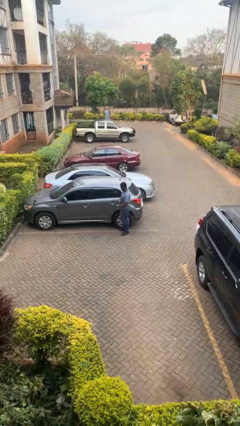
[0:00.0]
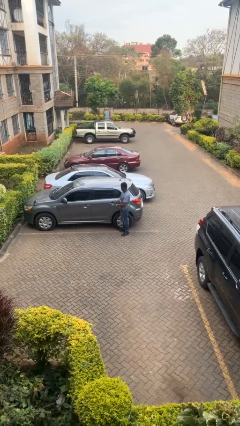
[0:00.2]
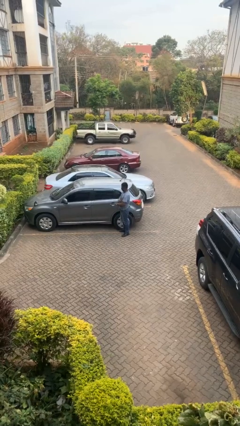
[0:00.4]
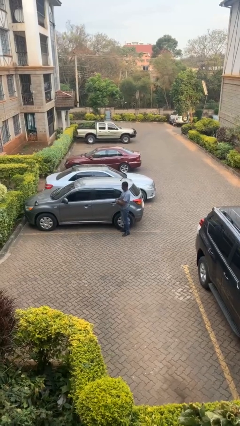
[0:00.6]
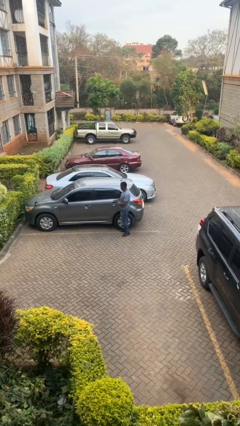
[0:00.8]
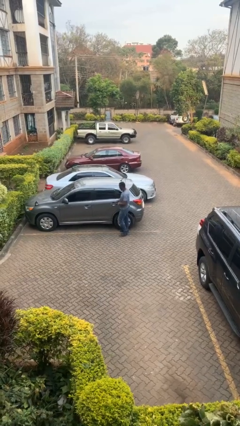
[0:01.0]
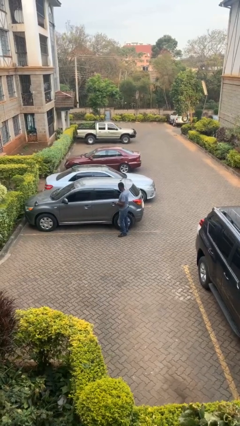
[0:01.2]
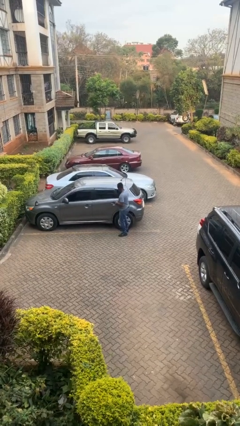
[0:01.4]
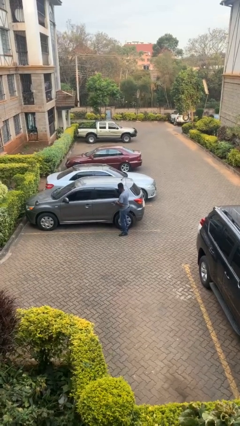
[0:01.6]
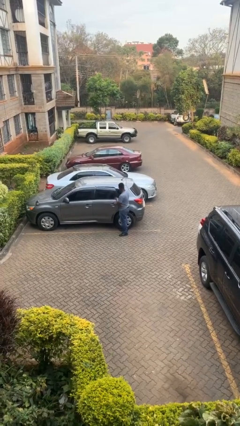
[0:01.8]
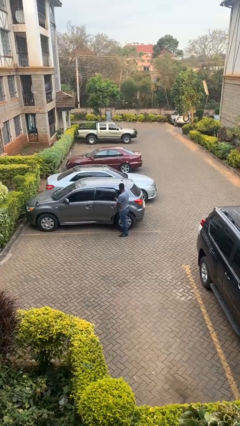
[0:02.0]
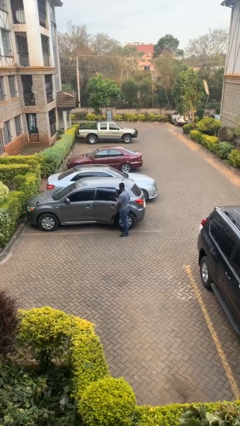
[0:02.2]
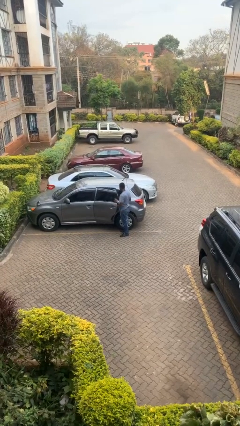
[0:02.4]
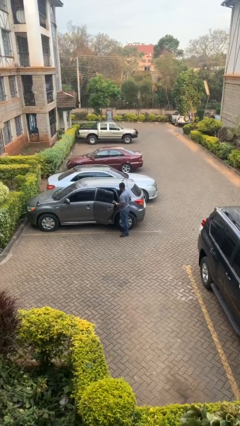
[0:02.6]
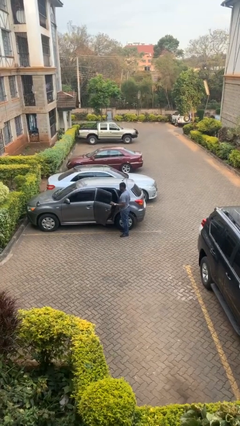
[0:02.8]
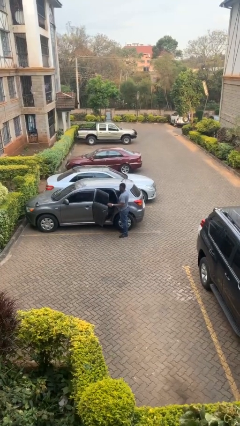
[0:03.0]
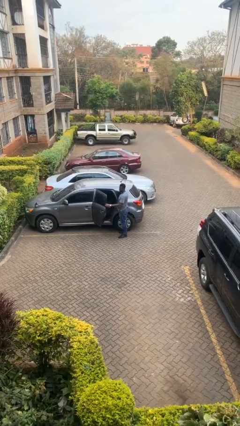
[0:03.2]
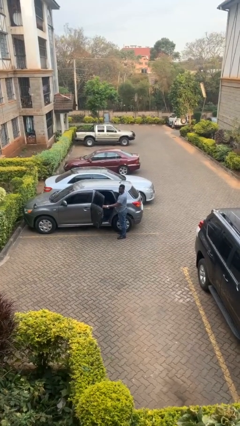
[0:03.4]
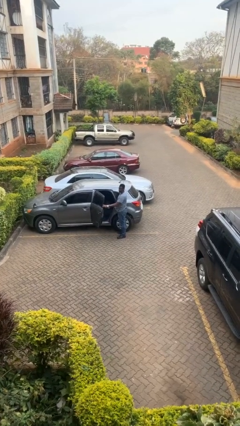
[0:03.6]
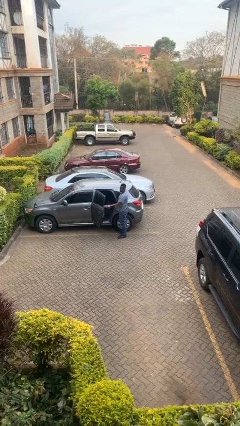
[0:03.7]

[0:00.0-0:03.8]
person opens car door

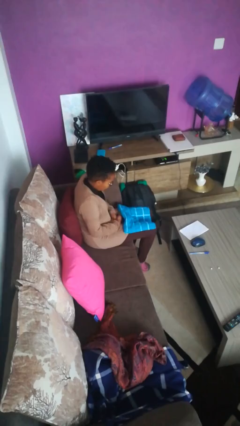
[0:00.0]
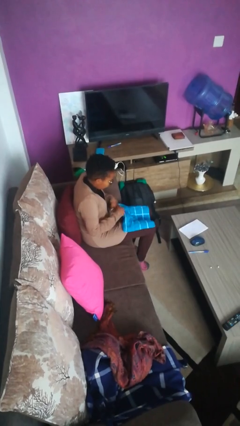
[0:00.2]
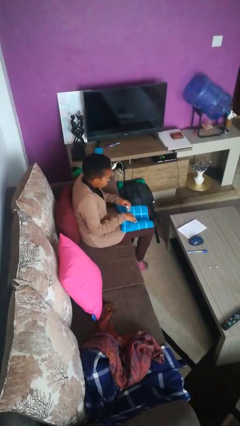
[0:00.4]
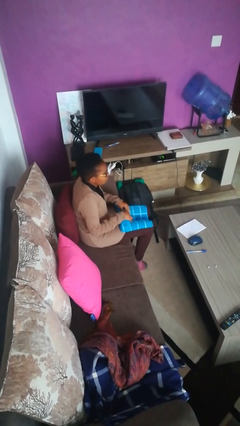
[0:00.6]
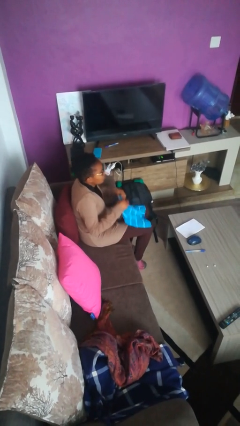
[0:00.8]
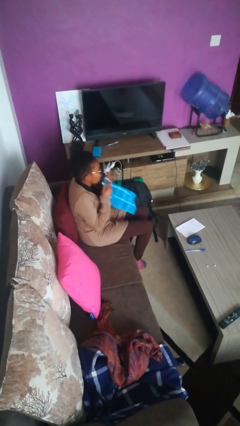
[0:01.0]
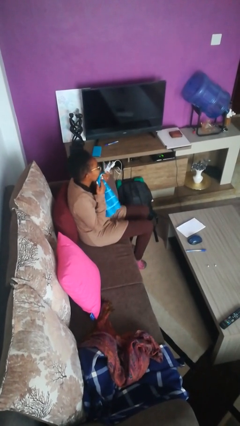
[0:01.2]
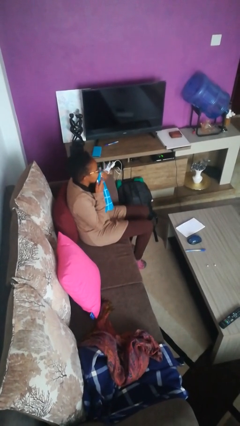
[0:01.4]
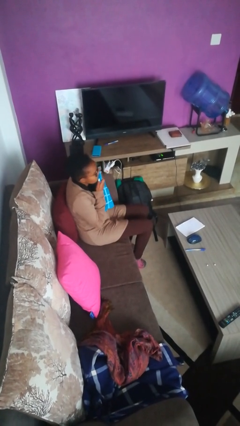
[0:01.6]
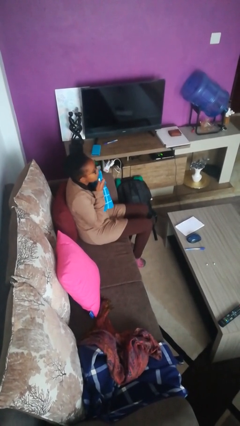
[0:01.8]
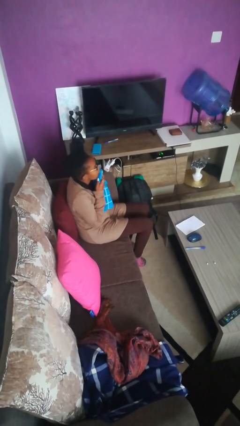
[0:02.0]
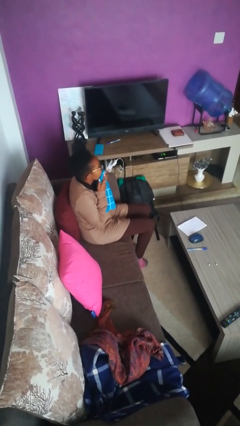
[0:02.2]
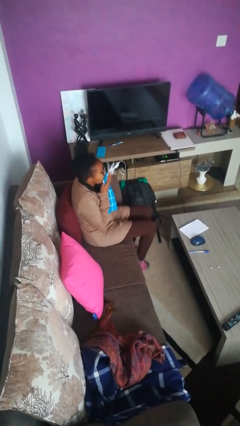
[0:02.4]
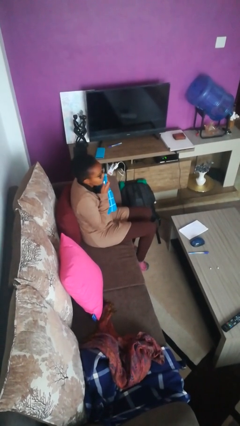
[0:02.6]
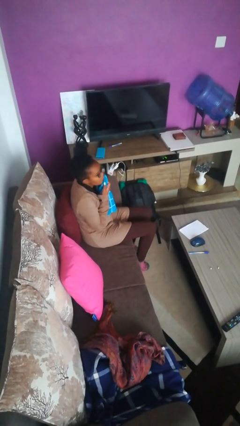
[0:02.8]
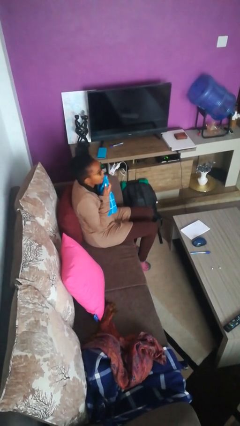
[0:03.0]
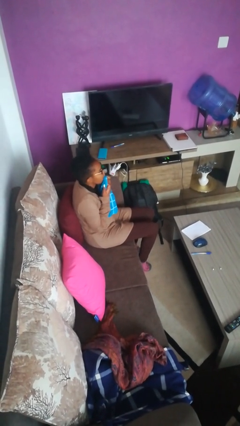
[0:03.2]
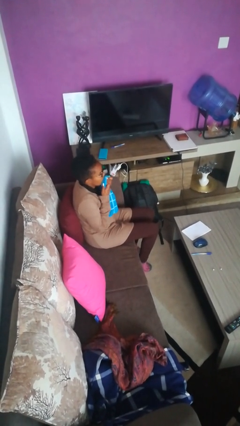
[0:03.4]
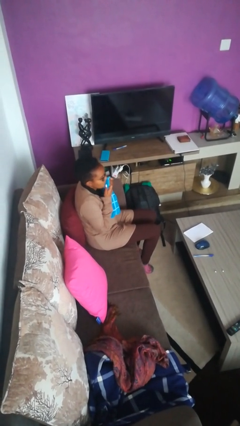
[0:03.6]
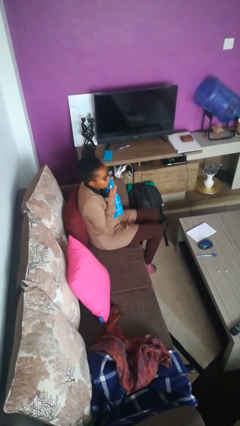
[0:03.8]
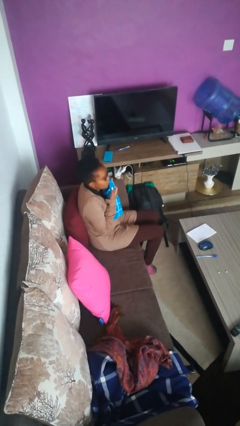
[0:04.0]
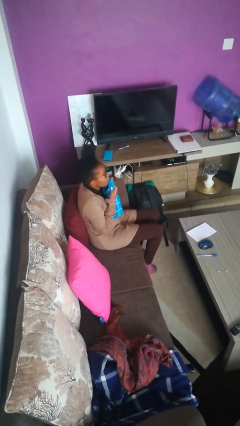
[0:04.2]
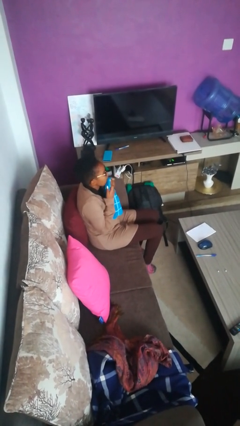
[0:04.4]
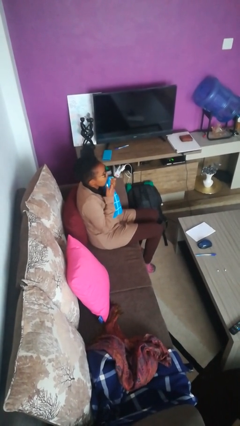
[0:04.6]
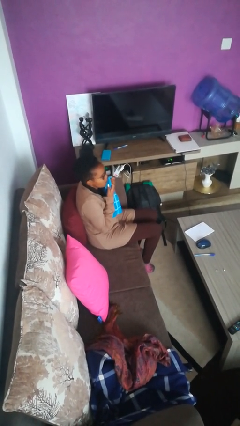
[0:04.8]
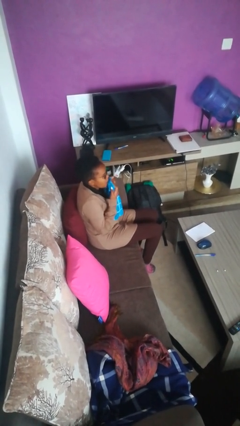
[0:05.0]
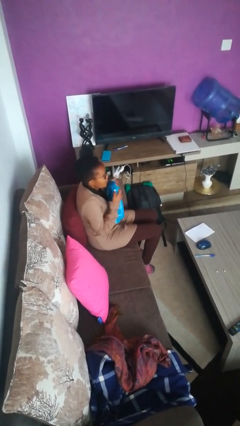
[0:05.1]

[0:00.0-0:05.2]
person wipes mouth with napkin

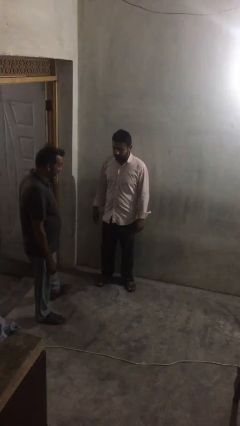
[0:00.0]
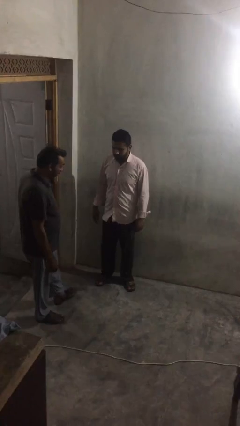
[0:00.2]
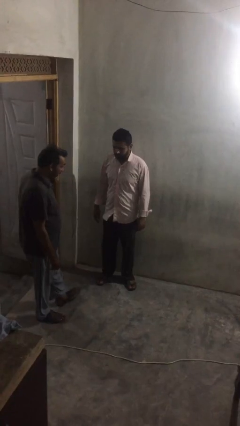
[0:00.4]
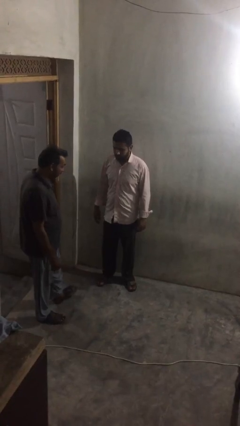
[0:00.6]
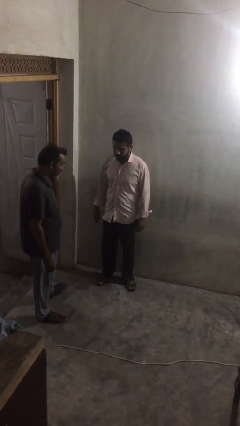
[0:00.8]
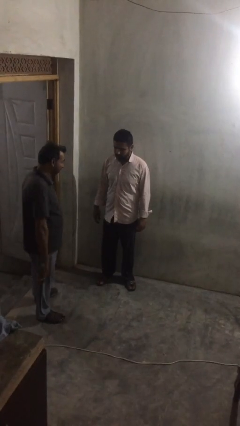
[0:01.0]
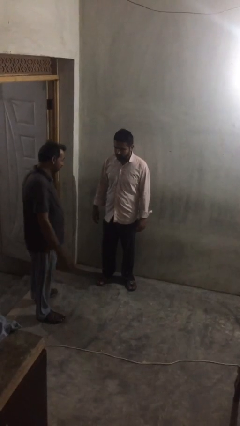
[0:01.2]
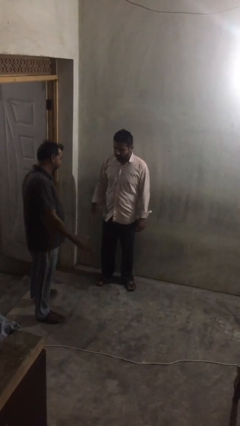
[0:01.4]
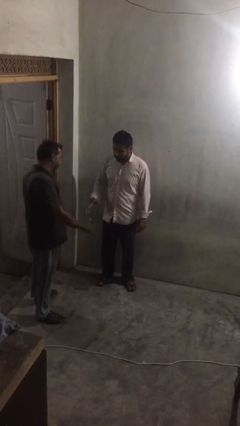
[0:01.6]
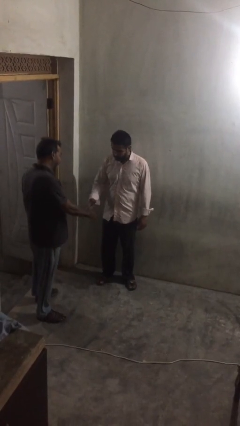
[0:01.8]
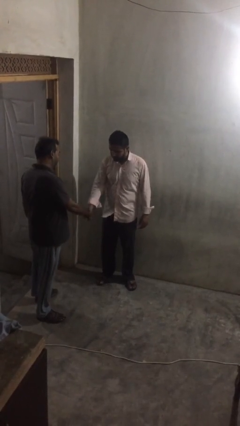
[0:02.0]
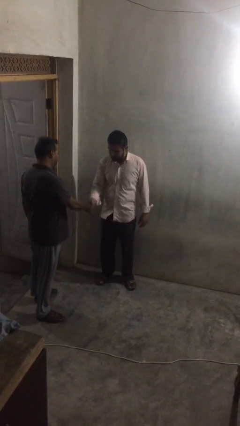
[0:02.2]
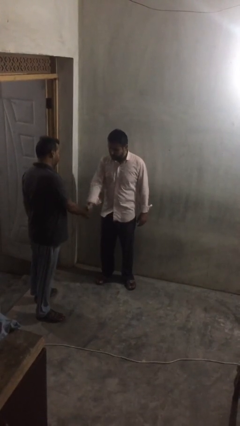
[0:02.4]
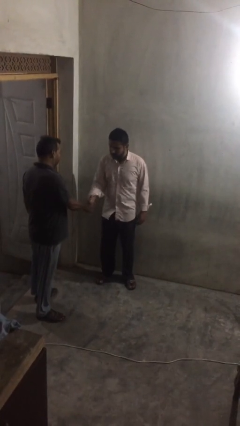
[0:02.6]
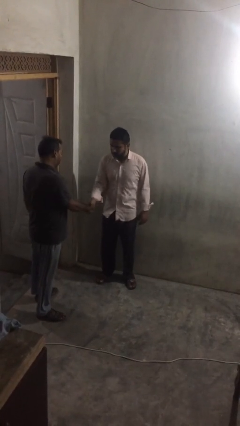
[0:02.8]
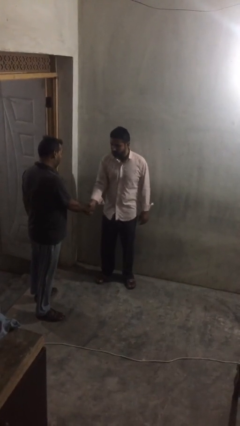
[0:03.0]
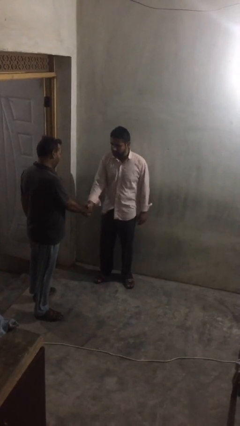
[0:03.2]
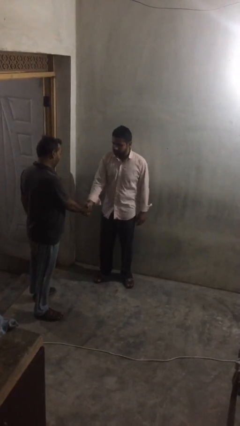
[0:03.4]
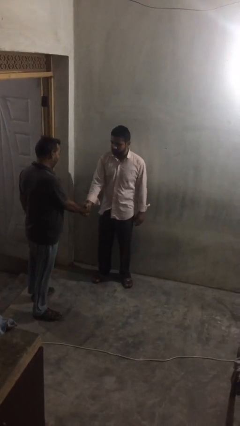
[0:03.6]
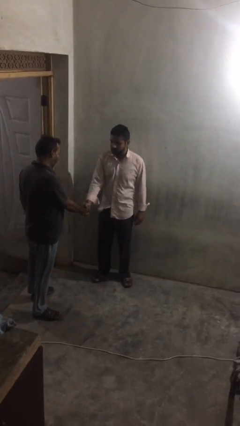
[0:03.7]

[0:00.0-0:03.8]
person shakes hand

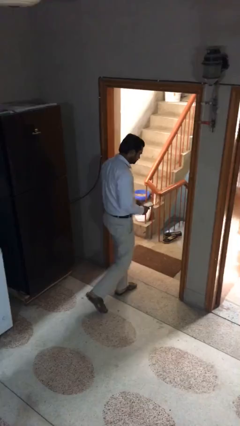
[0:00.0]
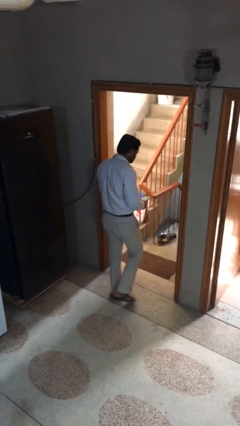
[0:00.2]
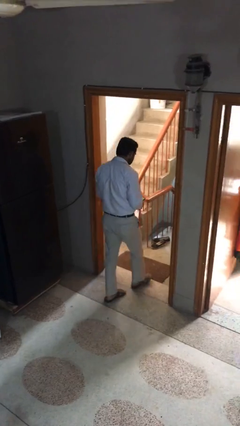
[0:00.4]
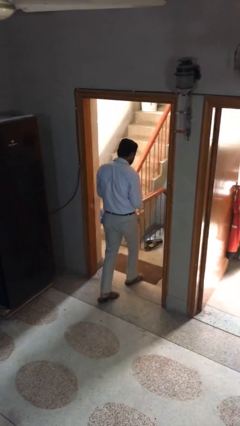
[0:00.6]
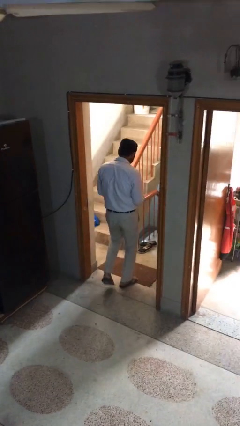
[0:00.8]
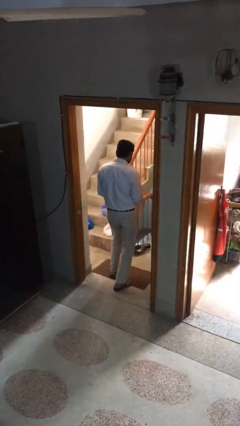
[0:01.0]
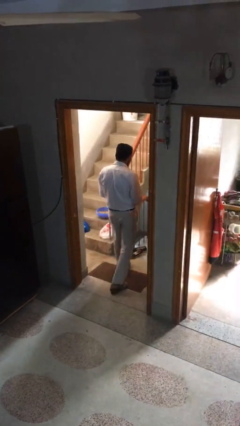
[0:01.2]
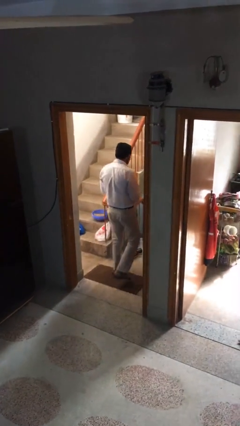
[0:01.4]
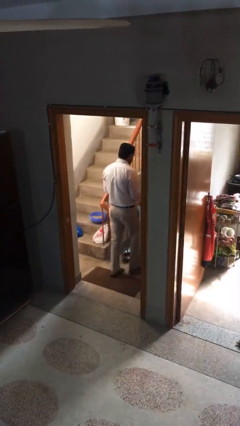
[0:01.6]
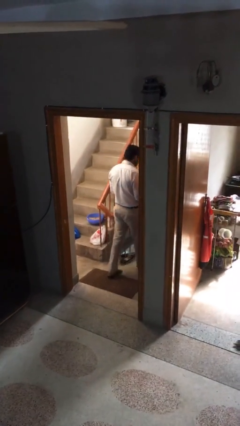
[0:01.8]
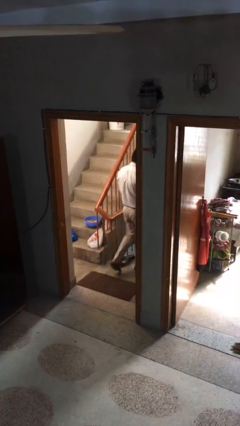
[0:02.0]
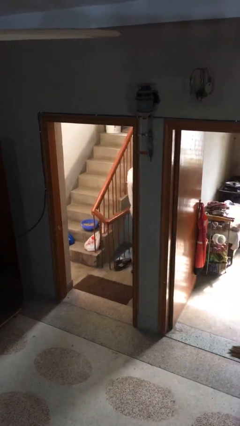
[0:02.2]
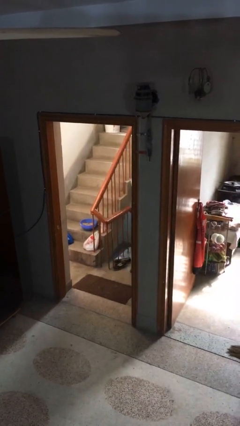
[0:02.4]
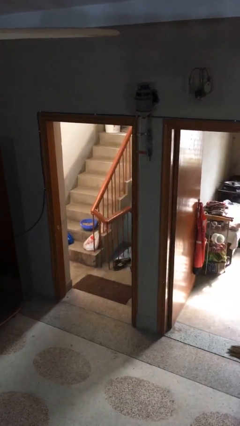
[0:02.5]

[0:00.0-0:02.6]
person exits scene through structure

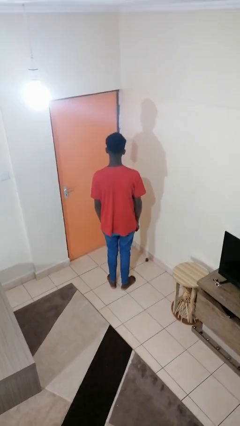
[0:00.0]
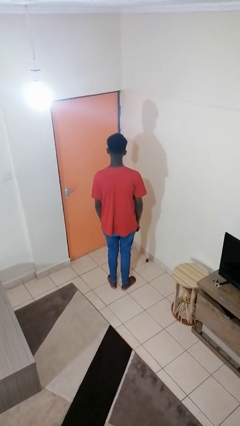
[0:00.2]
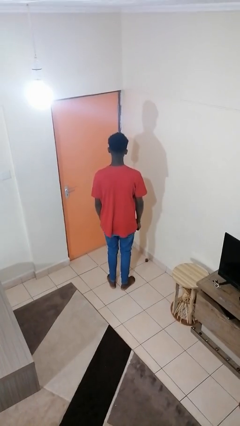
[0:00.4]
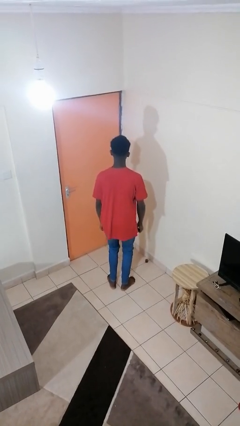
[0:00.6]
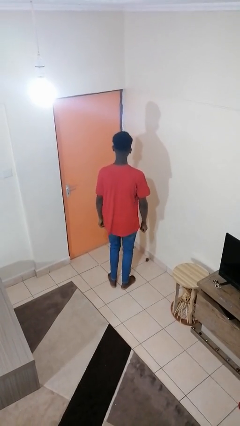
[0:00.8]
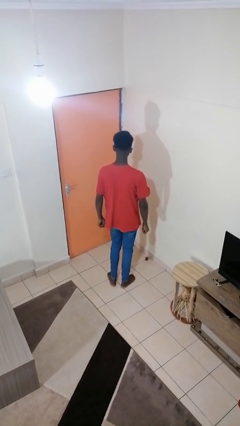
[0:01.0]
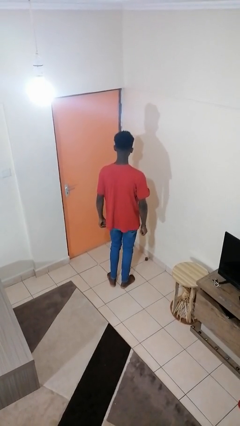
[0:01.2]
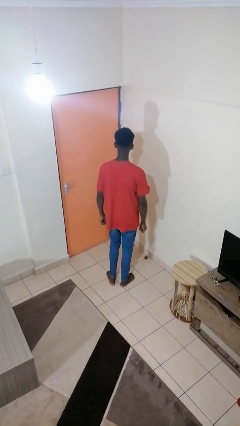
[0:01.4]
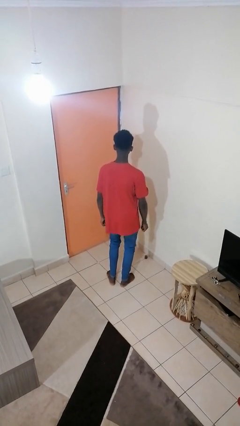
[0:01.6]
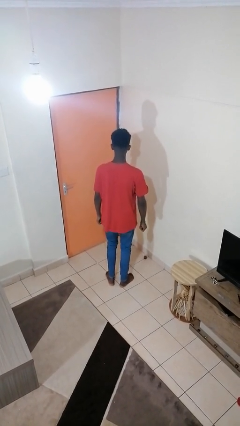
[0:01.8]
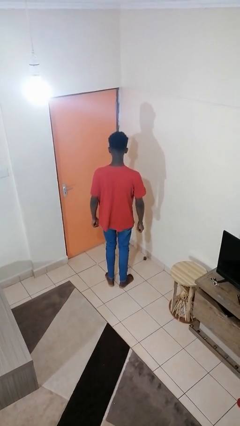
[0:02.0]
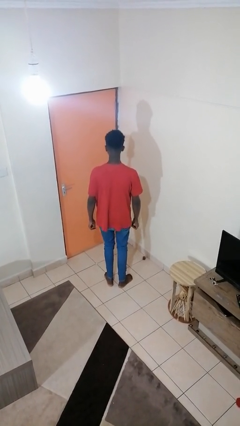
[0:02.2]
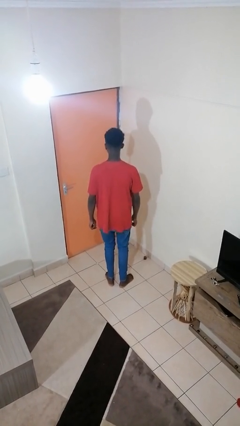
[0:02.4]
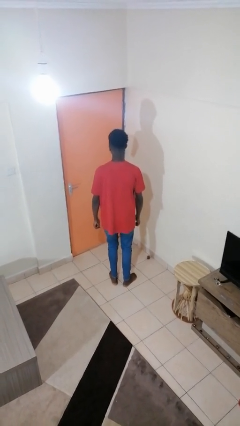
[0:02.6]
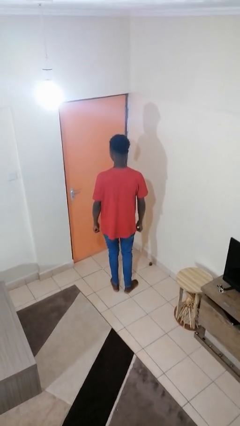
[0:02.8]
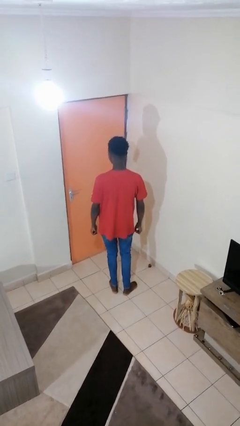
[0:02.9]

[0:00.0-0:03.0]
person wiggles hips
